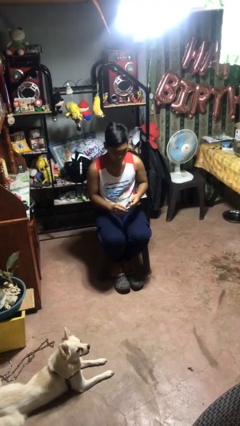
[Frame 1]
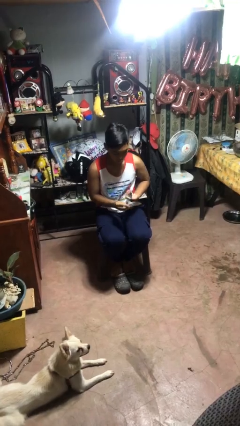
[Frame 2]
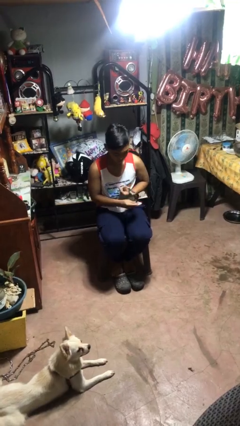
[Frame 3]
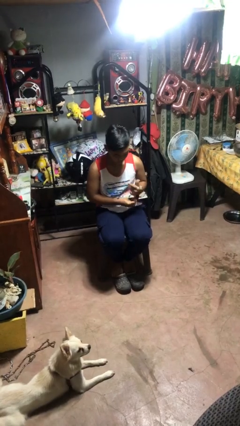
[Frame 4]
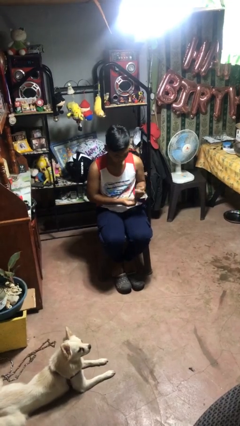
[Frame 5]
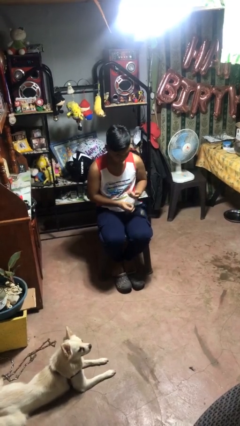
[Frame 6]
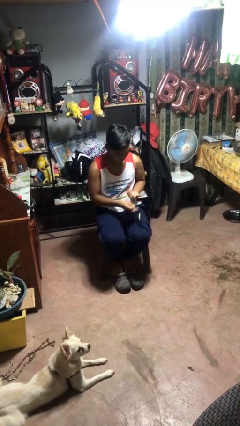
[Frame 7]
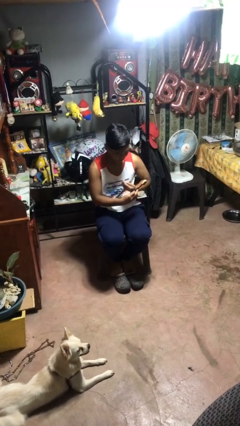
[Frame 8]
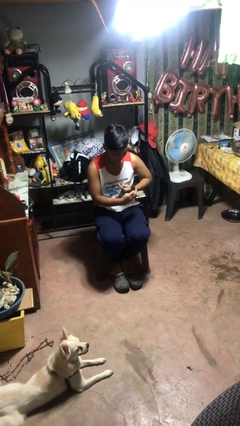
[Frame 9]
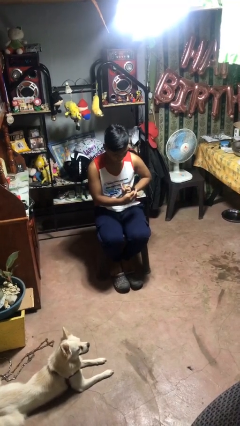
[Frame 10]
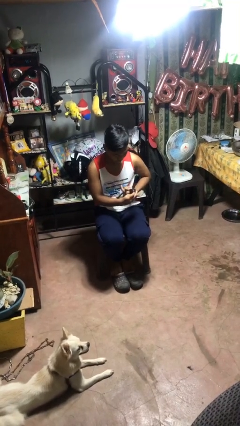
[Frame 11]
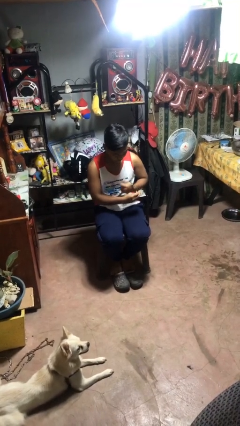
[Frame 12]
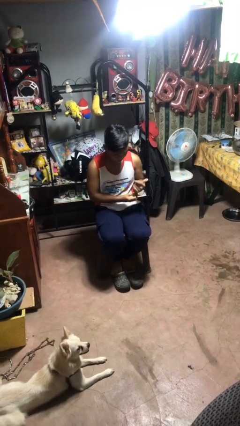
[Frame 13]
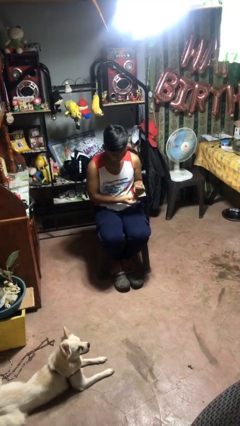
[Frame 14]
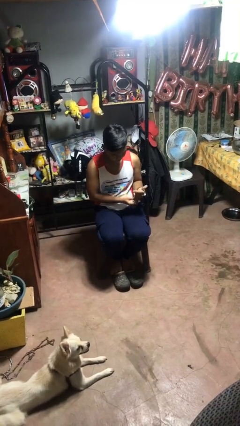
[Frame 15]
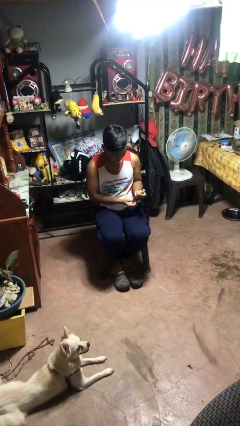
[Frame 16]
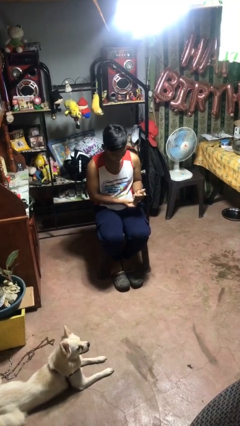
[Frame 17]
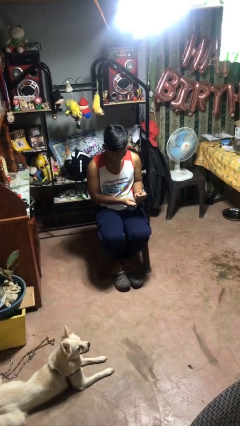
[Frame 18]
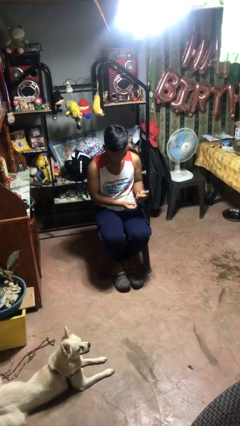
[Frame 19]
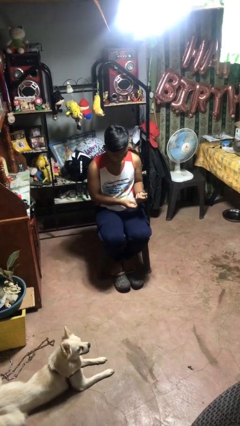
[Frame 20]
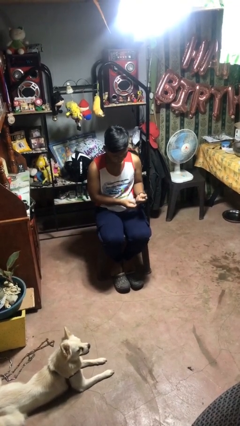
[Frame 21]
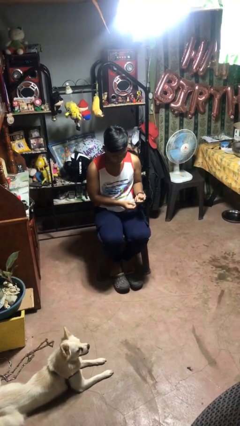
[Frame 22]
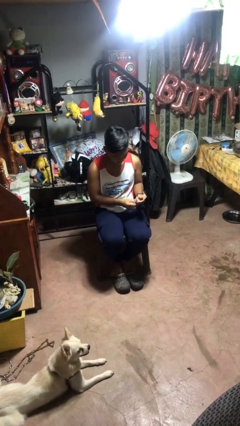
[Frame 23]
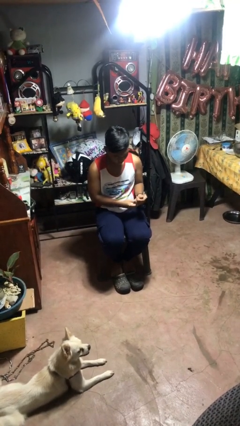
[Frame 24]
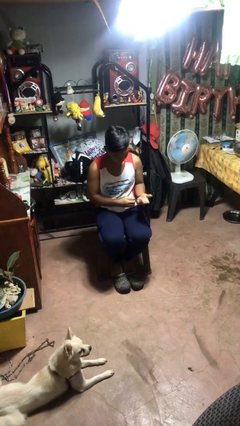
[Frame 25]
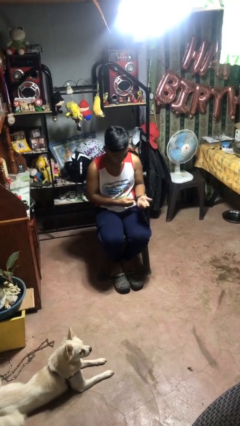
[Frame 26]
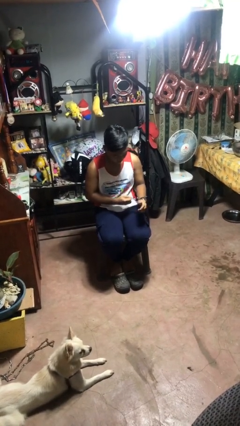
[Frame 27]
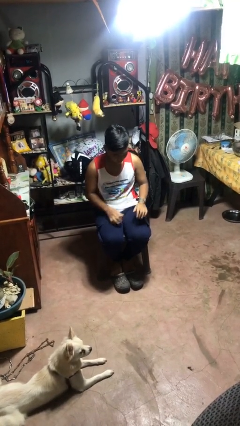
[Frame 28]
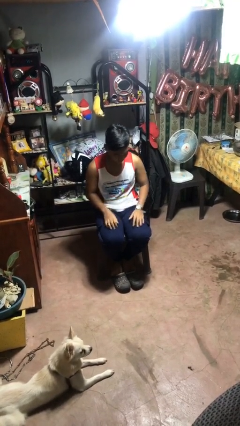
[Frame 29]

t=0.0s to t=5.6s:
person puts on wristwatch

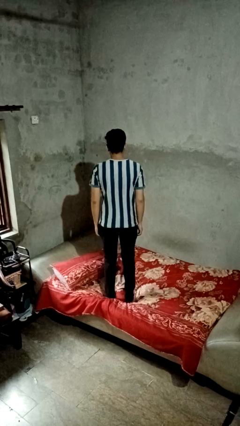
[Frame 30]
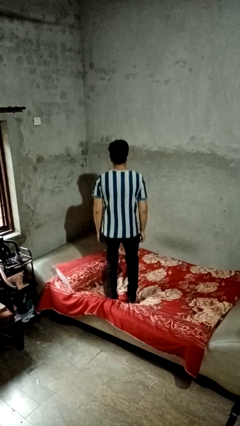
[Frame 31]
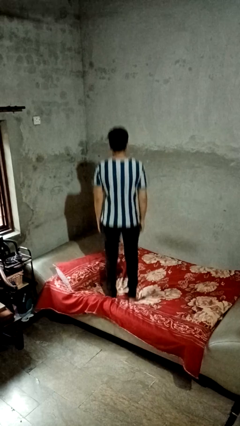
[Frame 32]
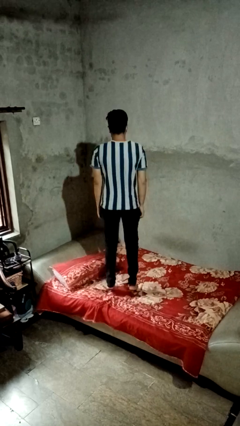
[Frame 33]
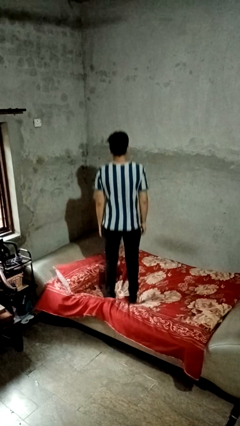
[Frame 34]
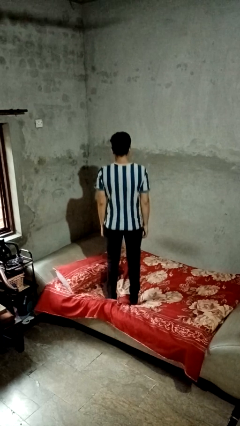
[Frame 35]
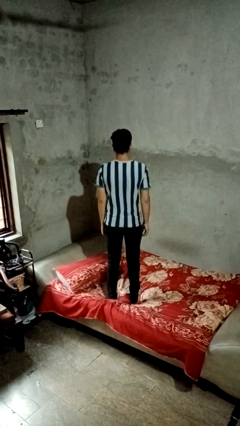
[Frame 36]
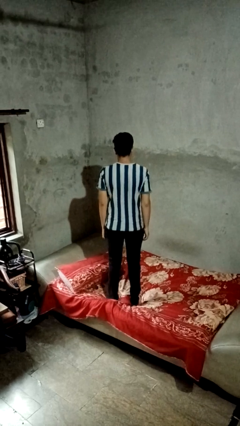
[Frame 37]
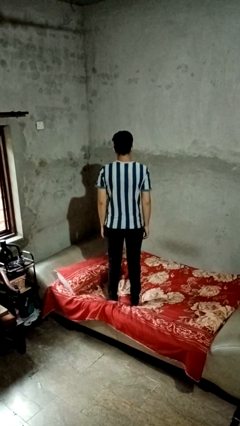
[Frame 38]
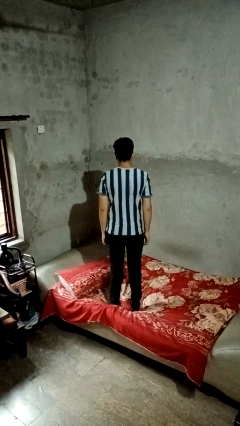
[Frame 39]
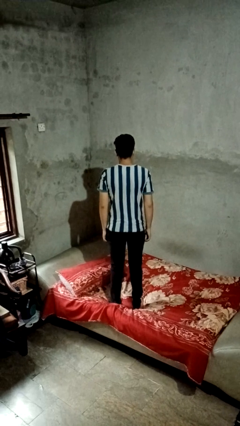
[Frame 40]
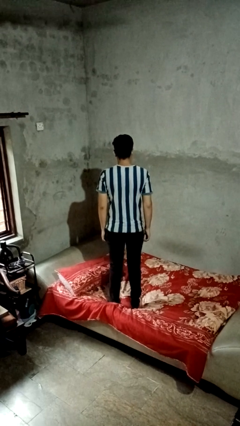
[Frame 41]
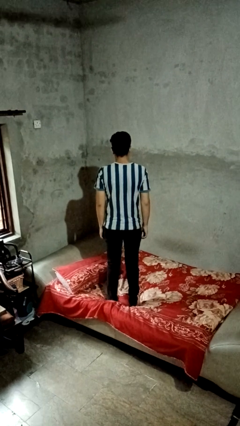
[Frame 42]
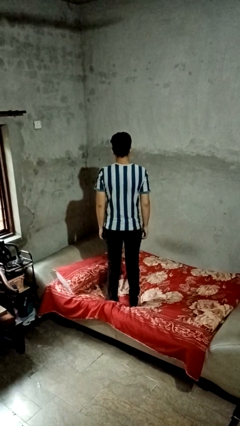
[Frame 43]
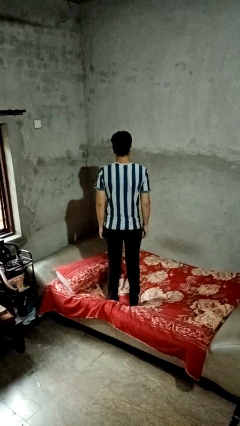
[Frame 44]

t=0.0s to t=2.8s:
person jumps on bed

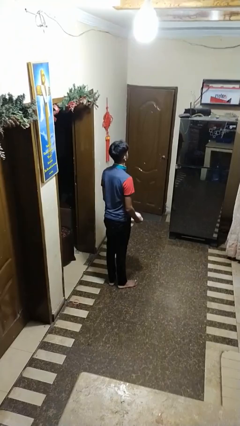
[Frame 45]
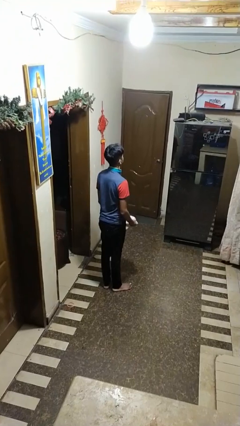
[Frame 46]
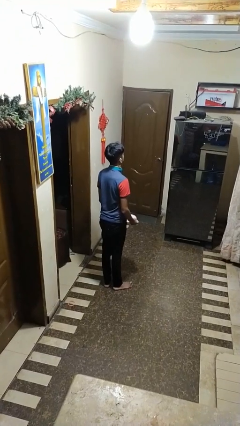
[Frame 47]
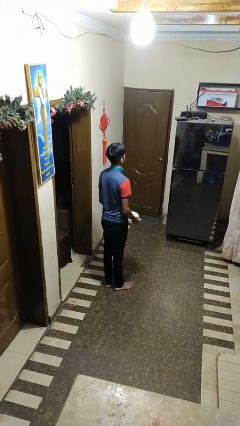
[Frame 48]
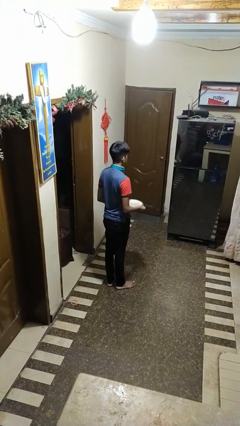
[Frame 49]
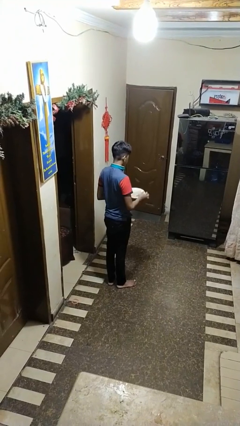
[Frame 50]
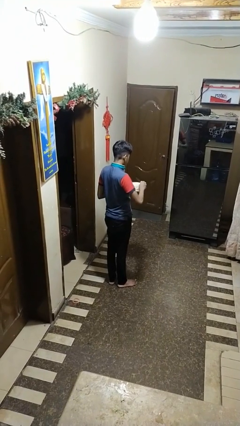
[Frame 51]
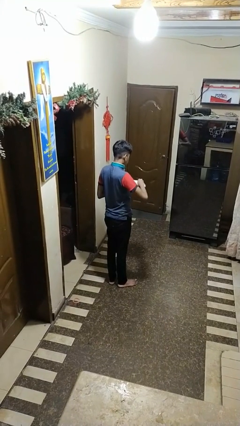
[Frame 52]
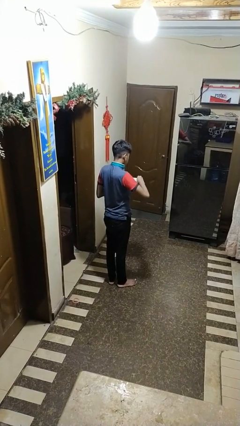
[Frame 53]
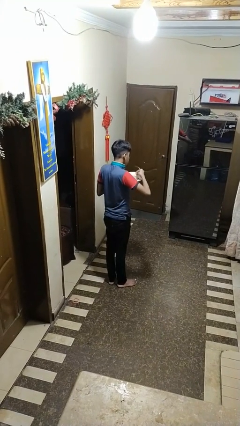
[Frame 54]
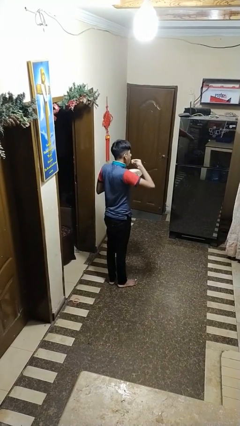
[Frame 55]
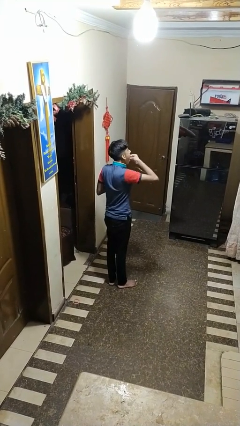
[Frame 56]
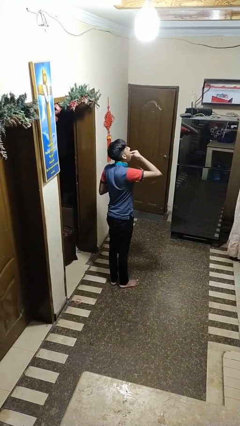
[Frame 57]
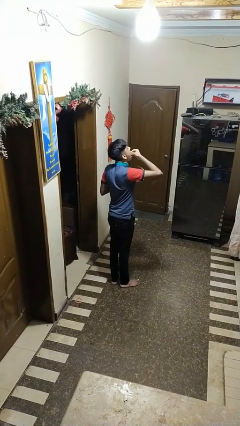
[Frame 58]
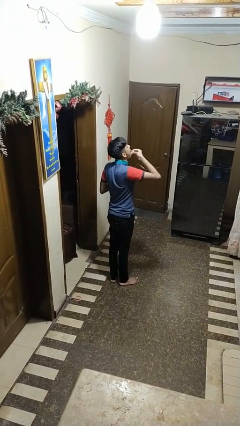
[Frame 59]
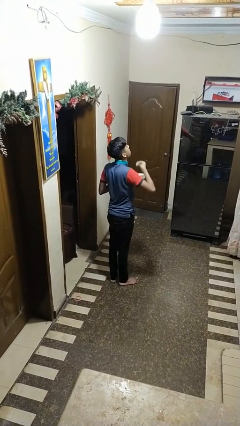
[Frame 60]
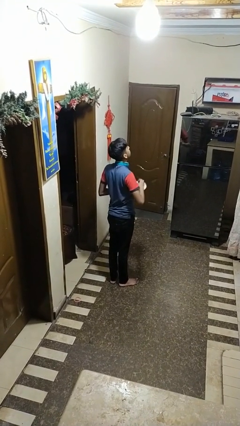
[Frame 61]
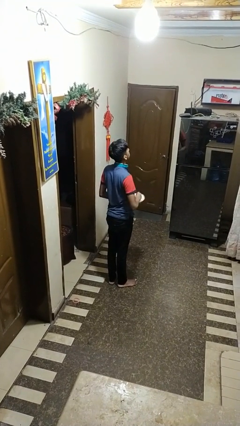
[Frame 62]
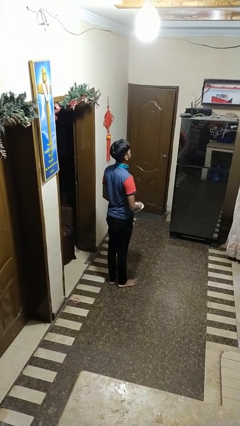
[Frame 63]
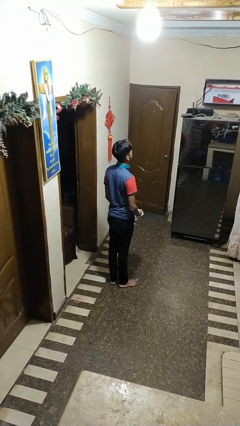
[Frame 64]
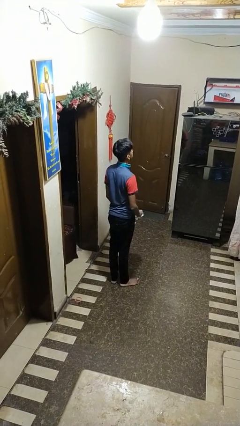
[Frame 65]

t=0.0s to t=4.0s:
person eats with hands

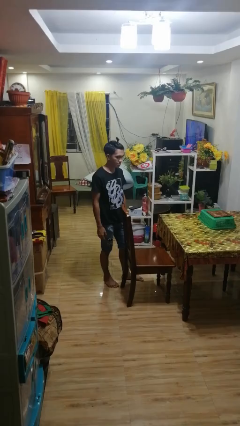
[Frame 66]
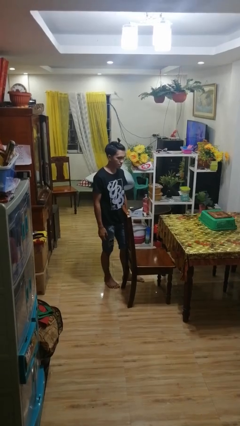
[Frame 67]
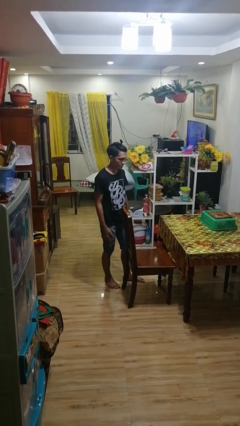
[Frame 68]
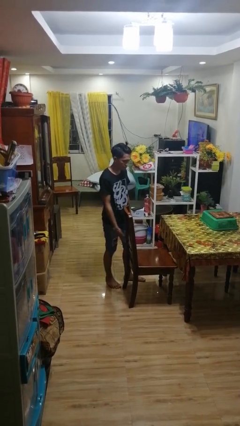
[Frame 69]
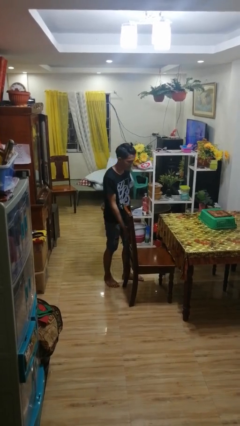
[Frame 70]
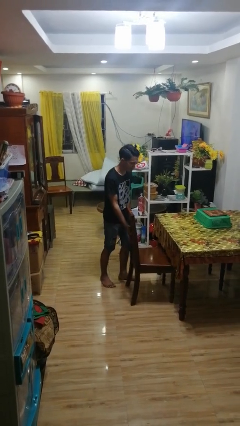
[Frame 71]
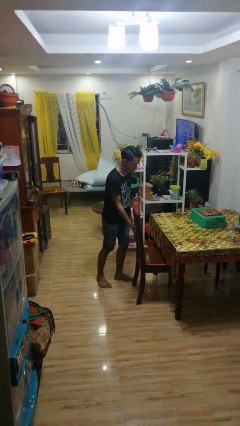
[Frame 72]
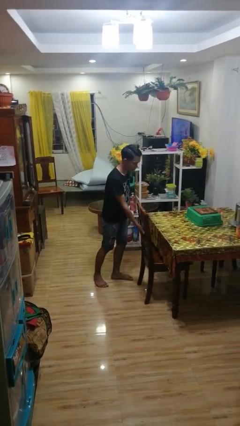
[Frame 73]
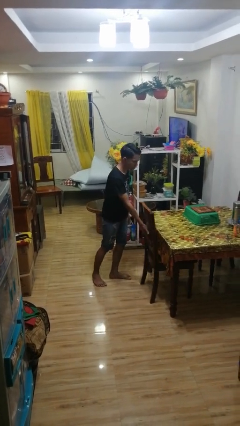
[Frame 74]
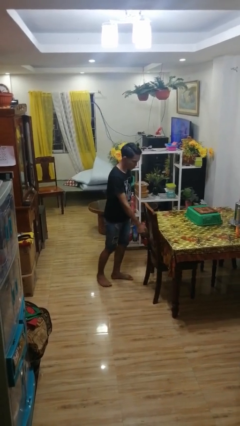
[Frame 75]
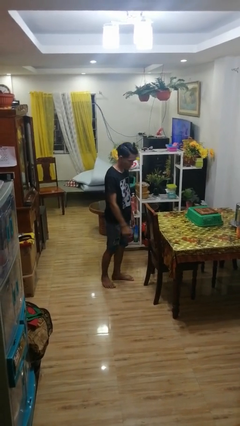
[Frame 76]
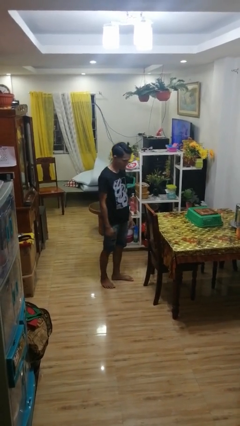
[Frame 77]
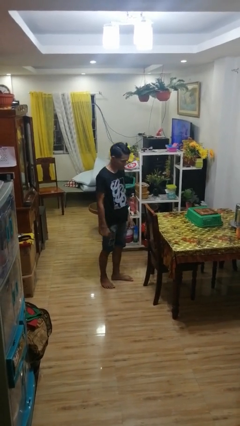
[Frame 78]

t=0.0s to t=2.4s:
person pushes in chair

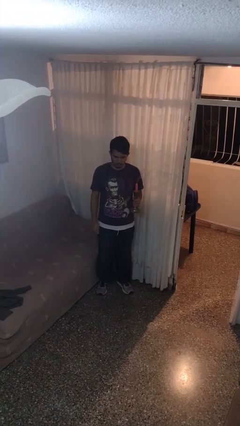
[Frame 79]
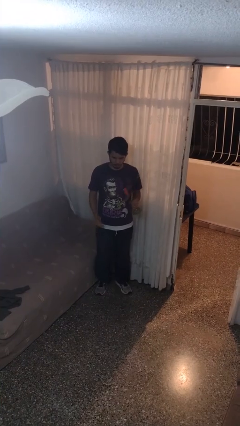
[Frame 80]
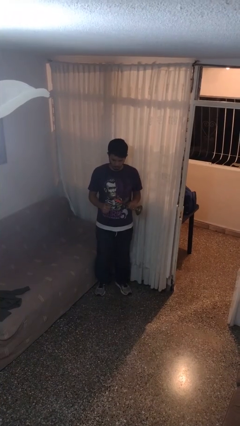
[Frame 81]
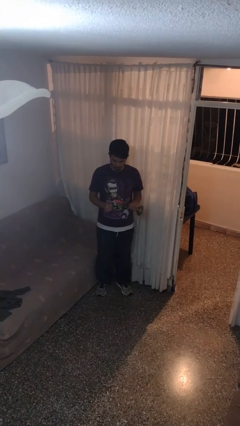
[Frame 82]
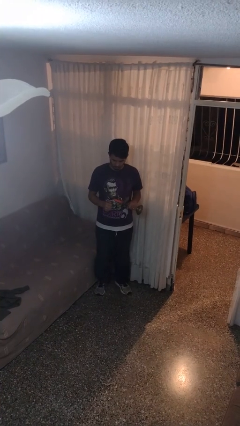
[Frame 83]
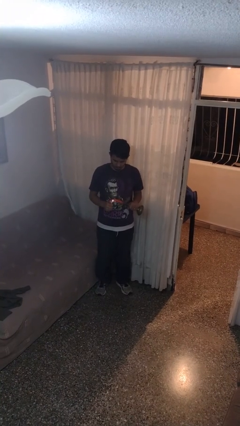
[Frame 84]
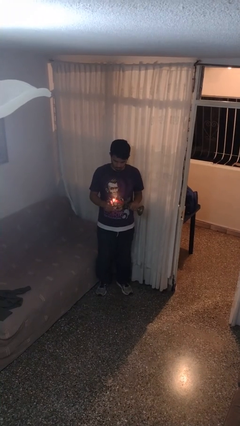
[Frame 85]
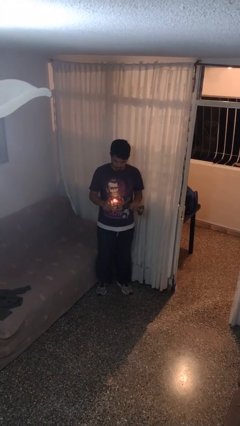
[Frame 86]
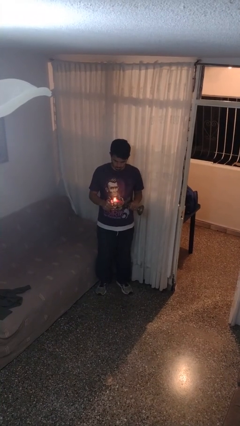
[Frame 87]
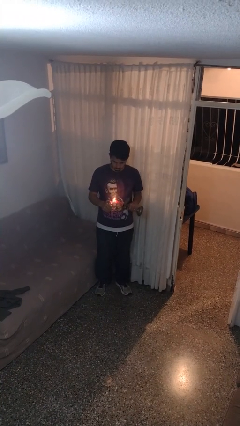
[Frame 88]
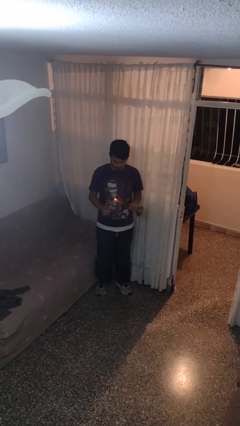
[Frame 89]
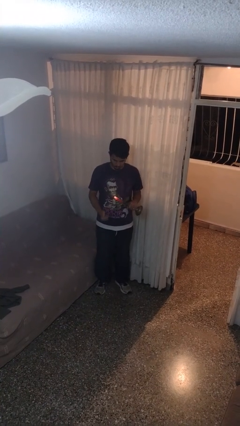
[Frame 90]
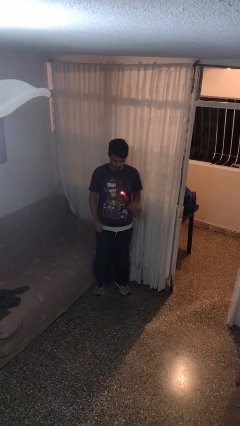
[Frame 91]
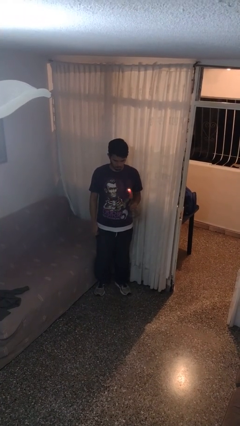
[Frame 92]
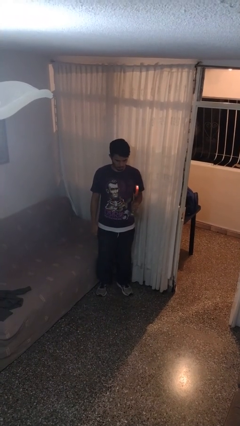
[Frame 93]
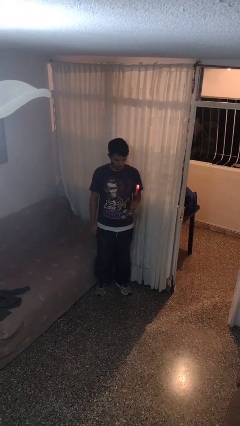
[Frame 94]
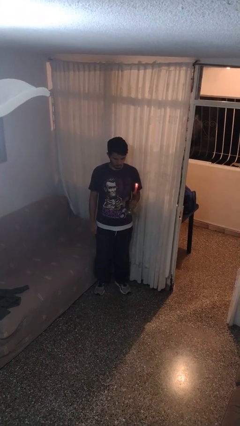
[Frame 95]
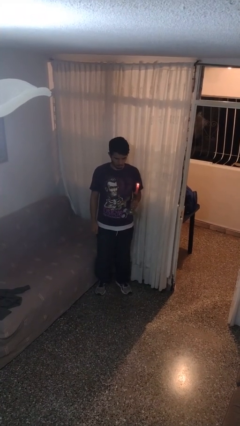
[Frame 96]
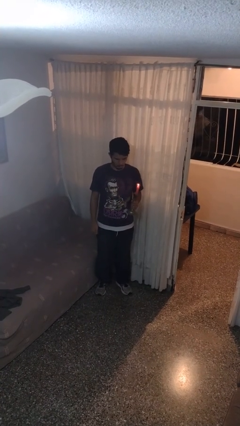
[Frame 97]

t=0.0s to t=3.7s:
person lights candle
